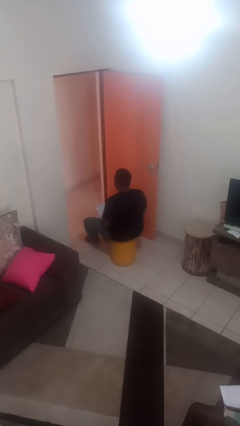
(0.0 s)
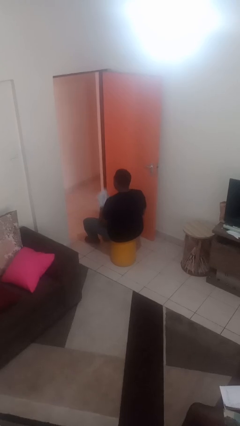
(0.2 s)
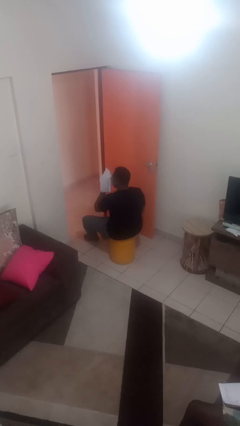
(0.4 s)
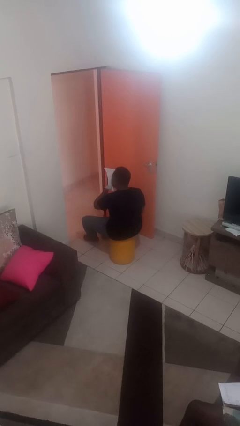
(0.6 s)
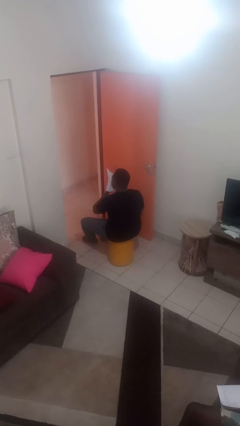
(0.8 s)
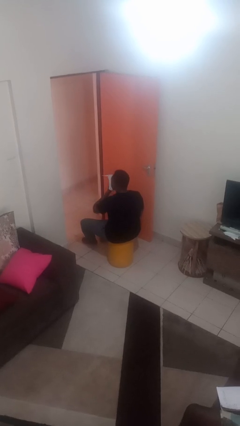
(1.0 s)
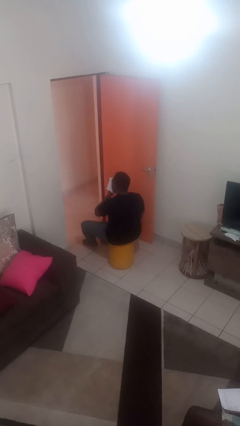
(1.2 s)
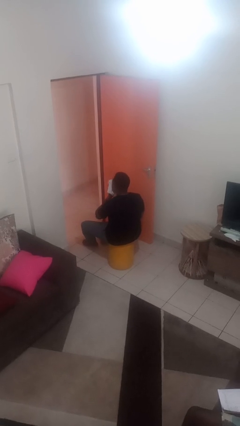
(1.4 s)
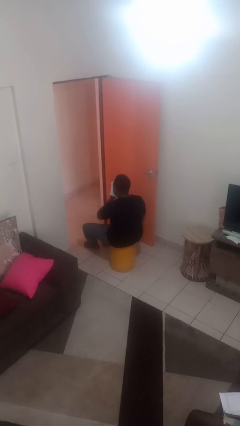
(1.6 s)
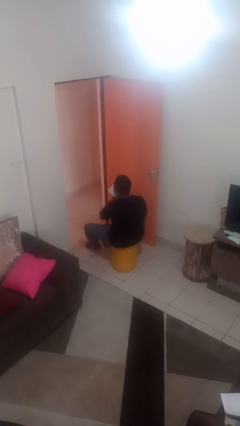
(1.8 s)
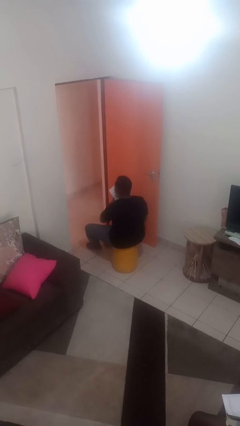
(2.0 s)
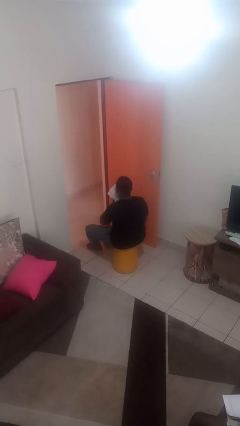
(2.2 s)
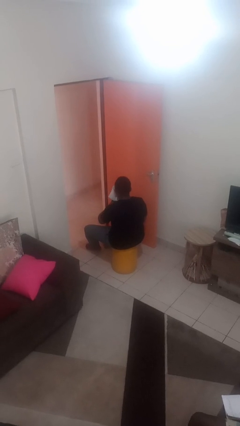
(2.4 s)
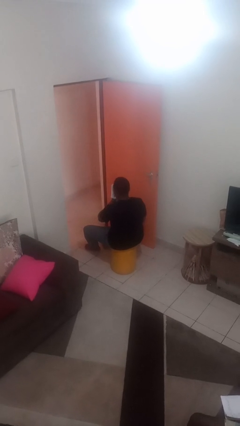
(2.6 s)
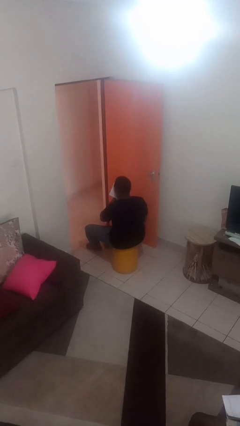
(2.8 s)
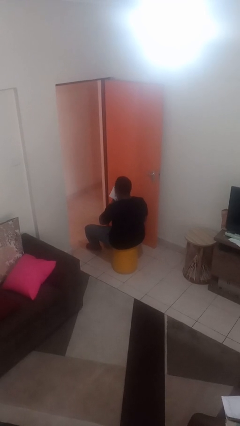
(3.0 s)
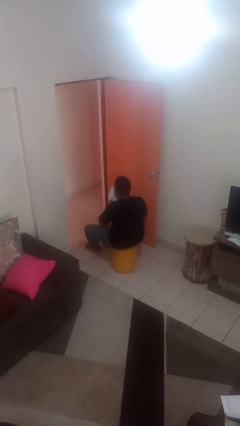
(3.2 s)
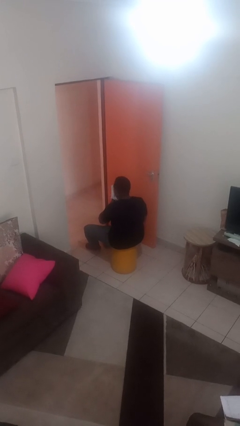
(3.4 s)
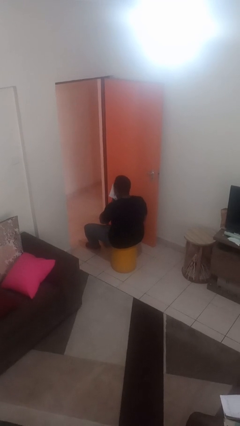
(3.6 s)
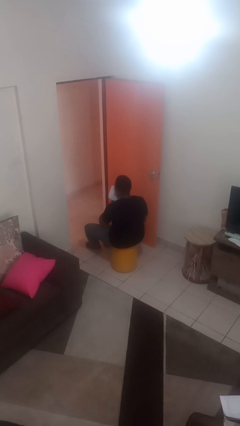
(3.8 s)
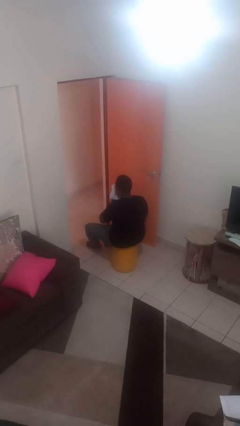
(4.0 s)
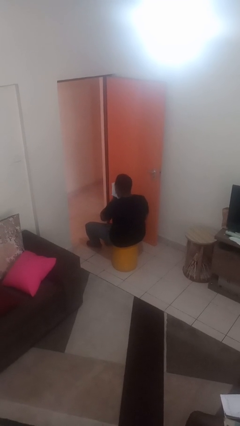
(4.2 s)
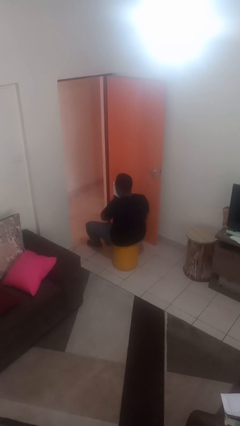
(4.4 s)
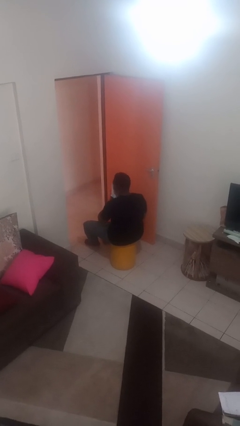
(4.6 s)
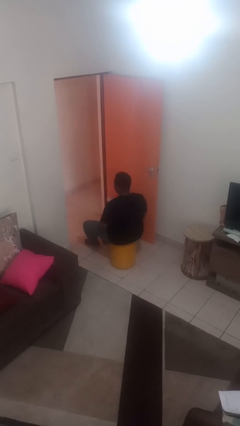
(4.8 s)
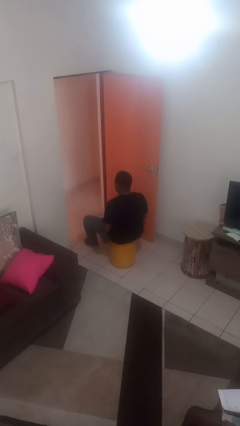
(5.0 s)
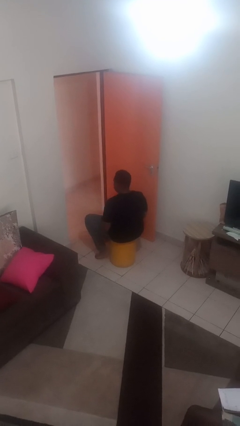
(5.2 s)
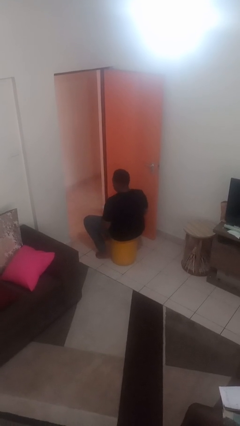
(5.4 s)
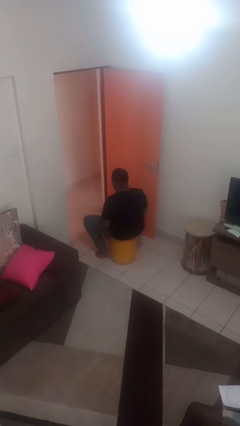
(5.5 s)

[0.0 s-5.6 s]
person wipes mouth with napkin

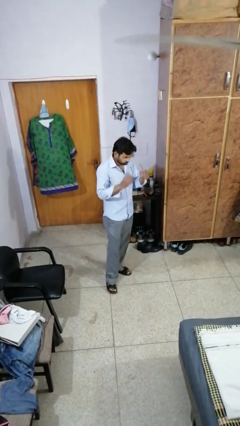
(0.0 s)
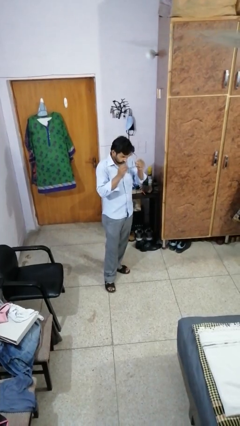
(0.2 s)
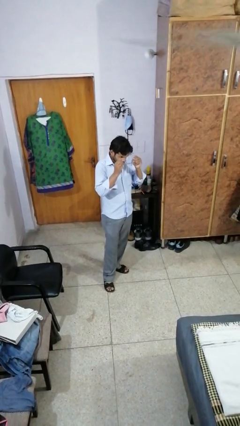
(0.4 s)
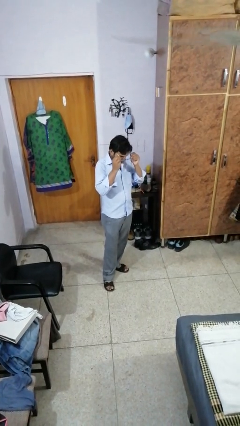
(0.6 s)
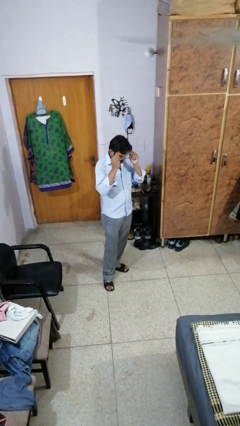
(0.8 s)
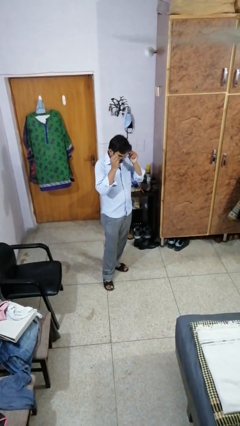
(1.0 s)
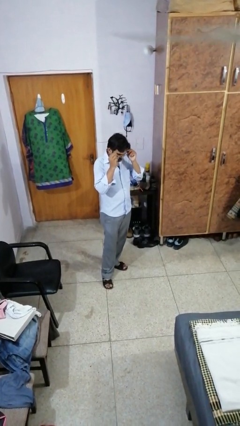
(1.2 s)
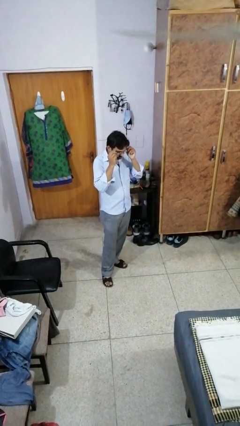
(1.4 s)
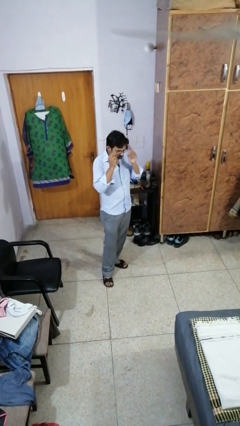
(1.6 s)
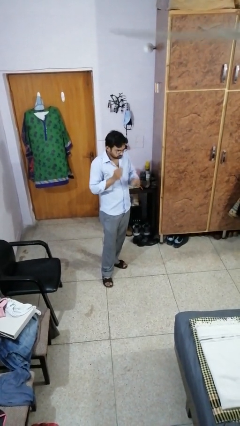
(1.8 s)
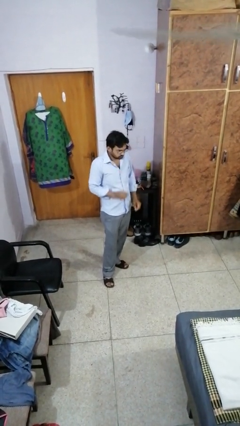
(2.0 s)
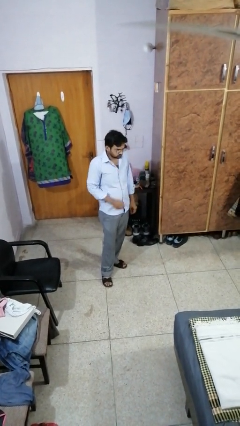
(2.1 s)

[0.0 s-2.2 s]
person puts on glasses

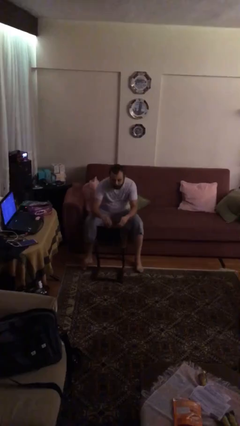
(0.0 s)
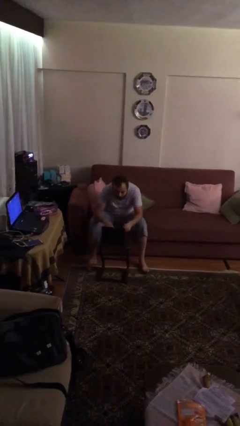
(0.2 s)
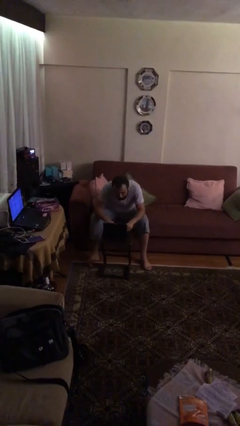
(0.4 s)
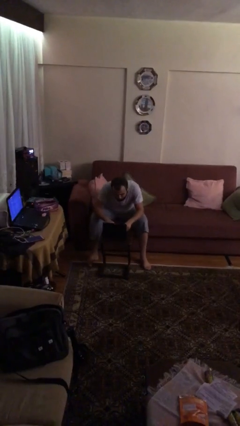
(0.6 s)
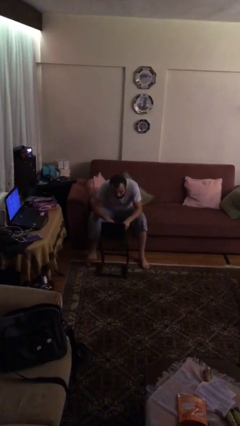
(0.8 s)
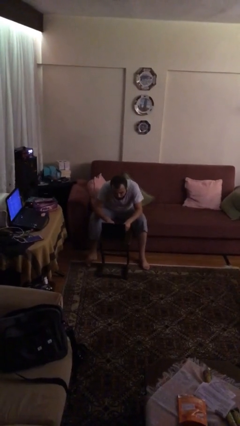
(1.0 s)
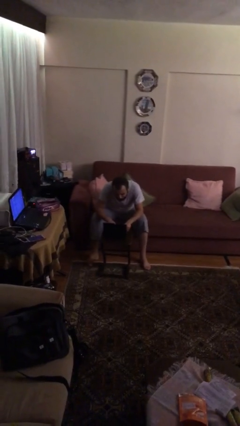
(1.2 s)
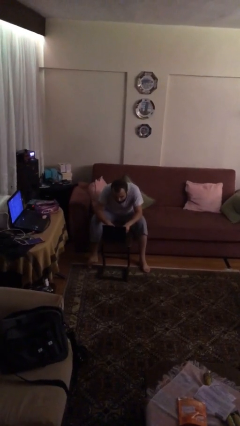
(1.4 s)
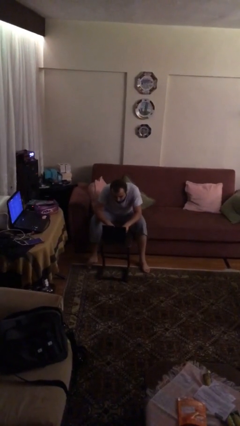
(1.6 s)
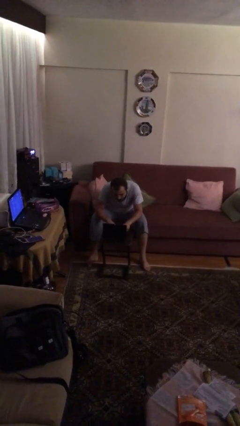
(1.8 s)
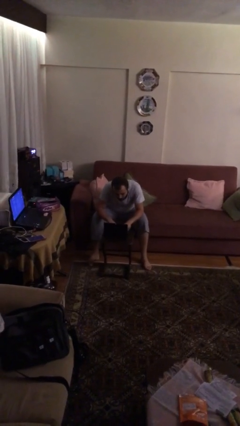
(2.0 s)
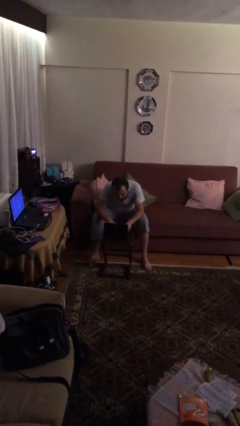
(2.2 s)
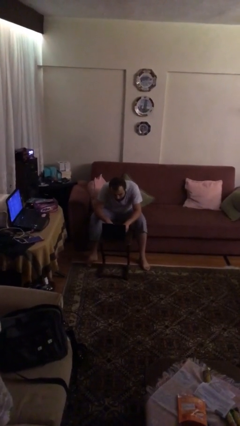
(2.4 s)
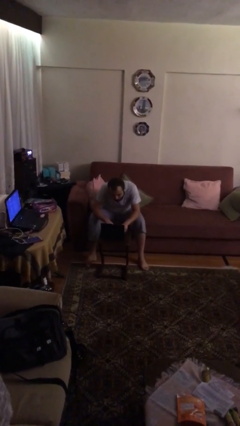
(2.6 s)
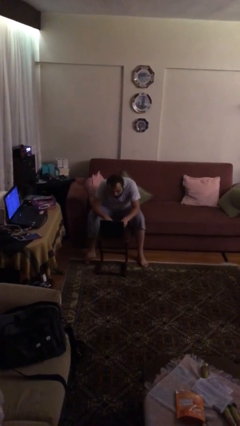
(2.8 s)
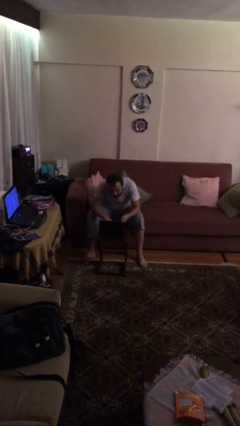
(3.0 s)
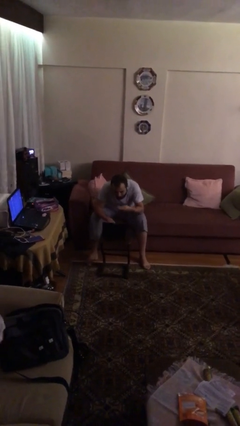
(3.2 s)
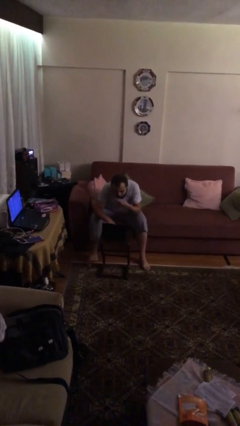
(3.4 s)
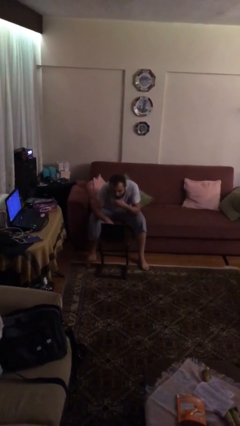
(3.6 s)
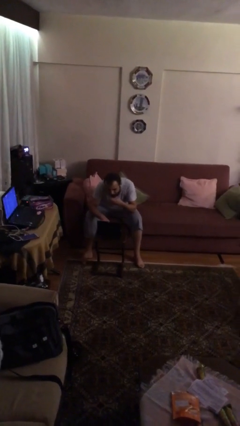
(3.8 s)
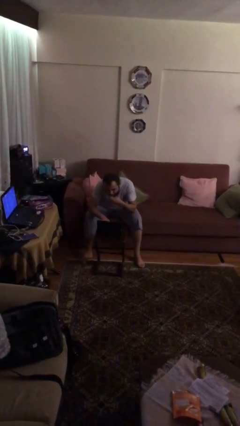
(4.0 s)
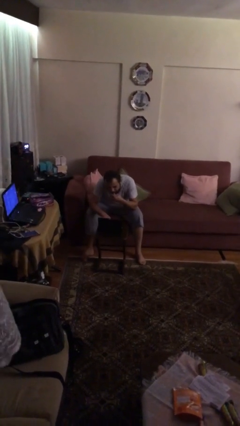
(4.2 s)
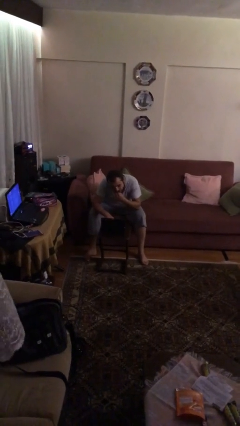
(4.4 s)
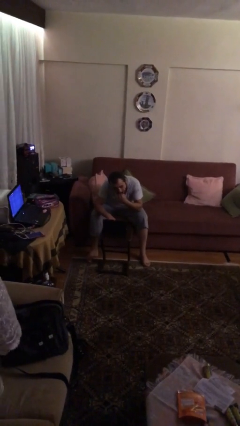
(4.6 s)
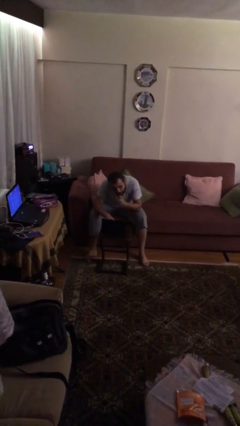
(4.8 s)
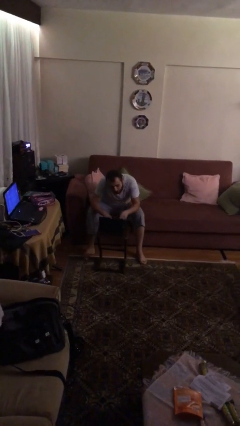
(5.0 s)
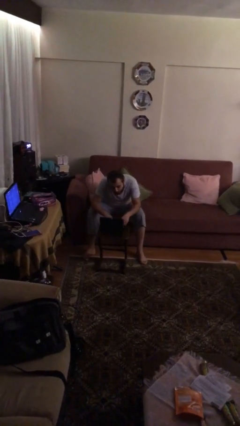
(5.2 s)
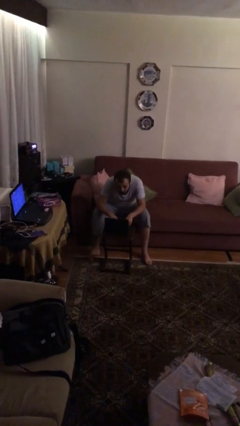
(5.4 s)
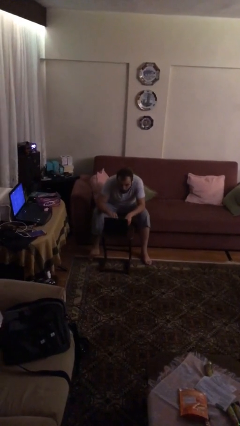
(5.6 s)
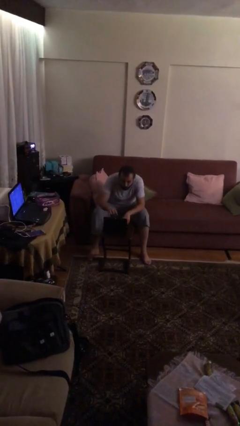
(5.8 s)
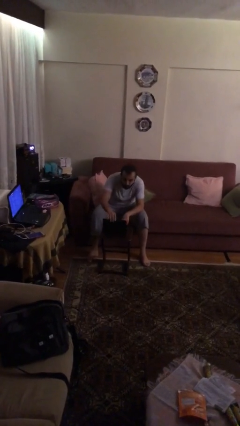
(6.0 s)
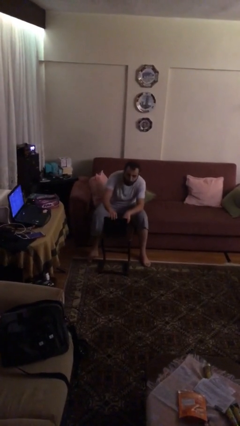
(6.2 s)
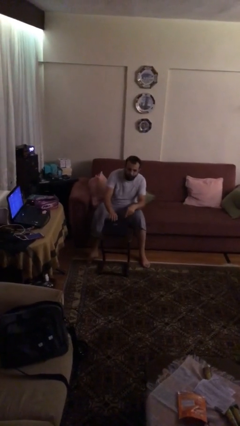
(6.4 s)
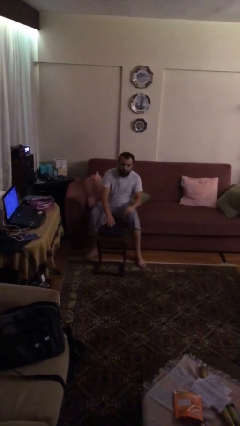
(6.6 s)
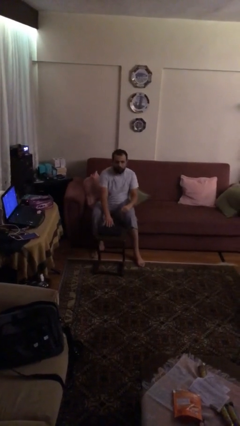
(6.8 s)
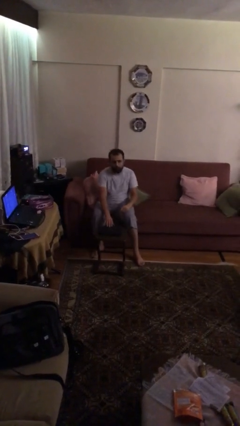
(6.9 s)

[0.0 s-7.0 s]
person interacts with laptop

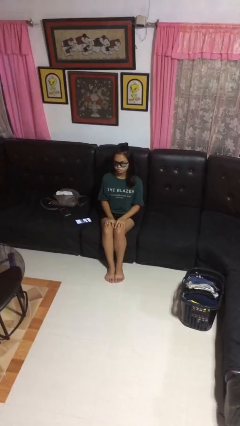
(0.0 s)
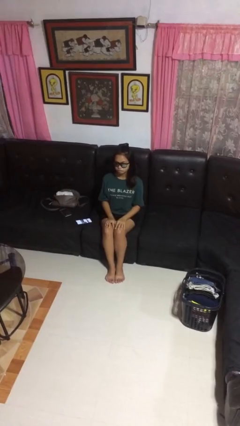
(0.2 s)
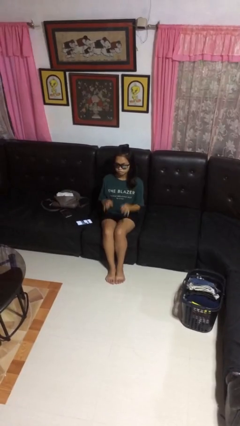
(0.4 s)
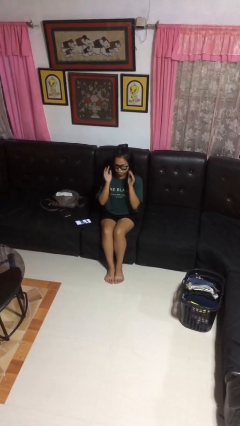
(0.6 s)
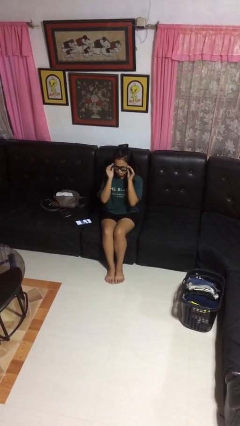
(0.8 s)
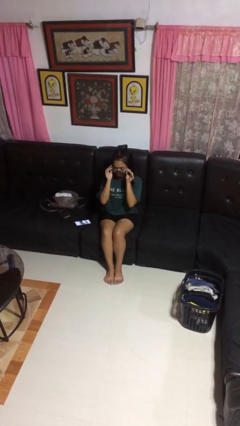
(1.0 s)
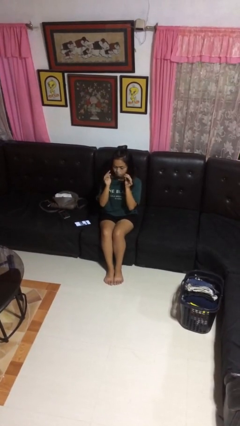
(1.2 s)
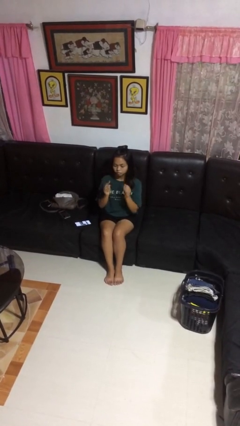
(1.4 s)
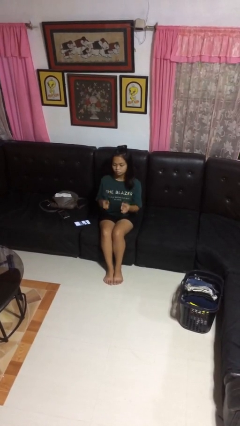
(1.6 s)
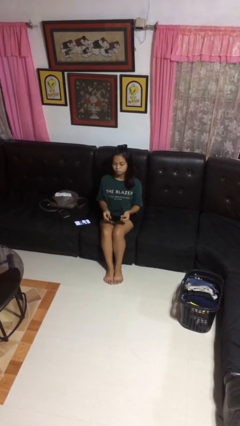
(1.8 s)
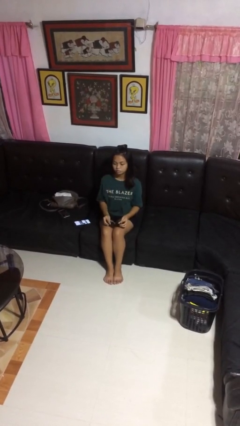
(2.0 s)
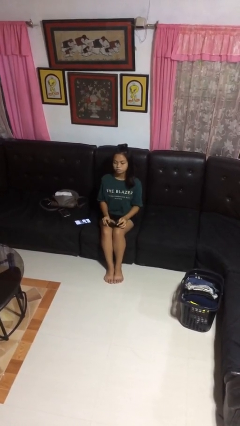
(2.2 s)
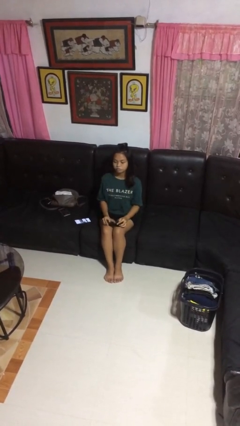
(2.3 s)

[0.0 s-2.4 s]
person takes off sunglasses

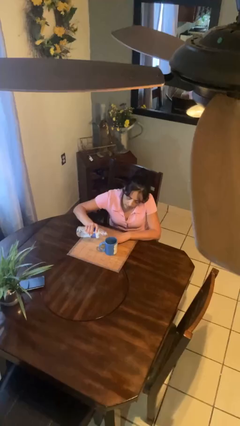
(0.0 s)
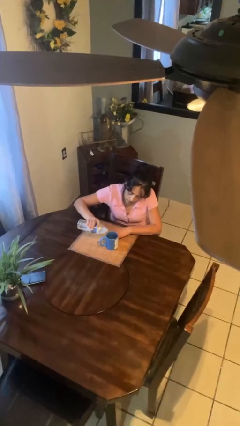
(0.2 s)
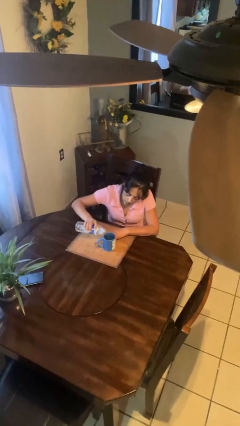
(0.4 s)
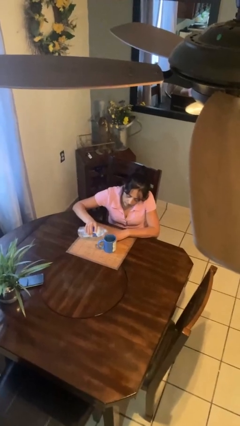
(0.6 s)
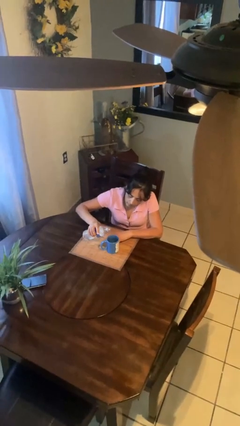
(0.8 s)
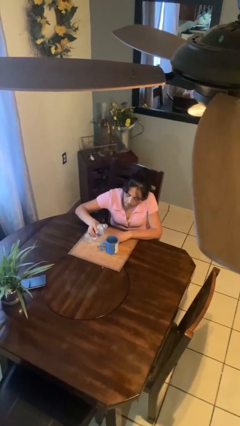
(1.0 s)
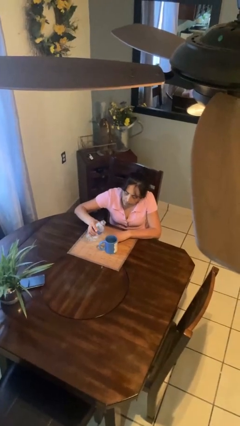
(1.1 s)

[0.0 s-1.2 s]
person pours liquid into cup
